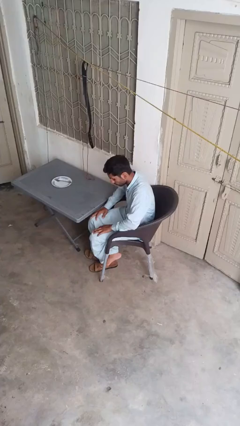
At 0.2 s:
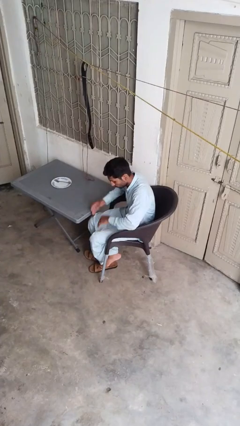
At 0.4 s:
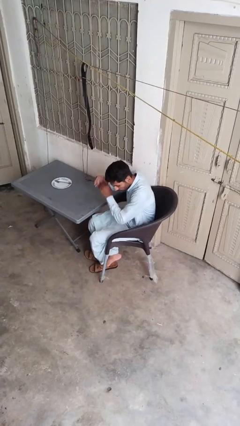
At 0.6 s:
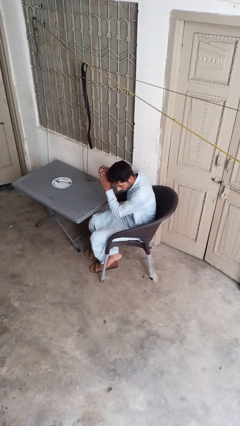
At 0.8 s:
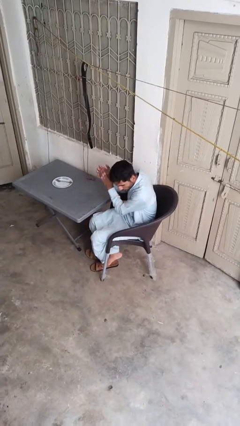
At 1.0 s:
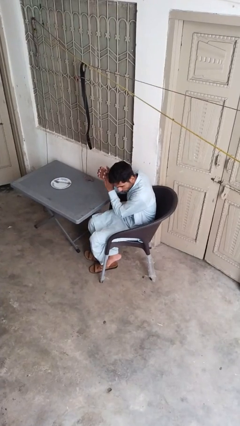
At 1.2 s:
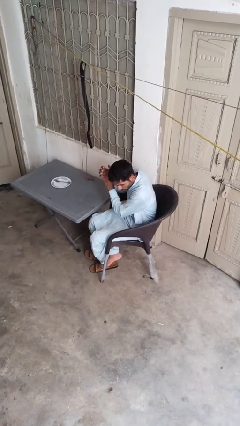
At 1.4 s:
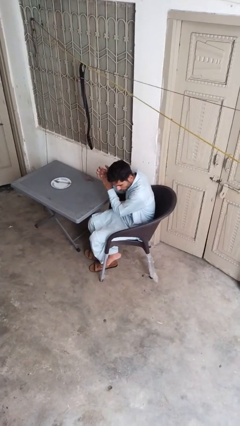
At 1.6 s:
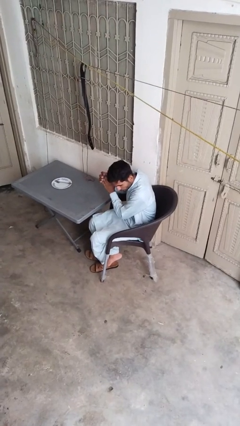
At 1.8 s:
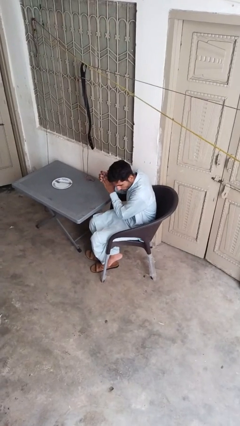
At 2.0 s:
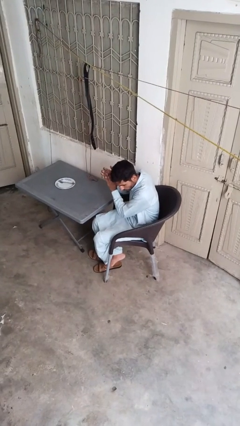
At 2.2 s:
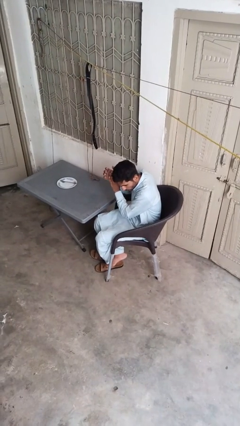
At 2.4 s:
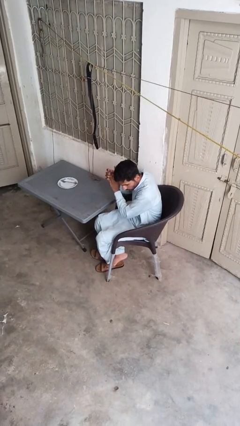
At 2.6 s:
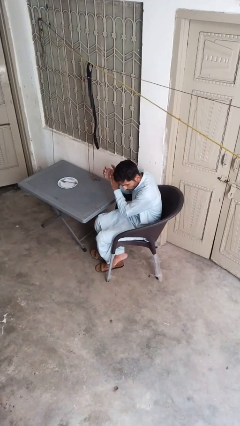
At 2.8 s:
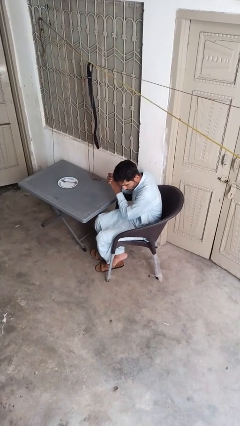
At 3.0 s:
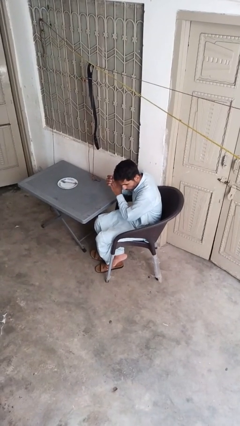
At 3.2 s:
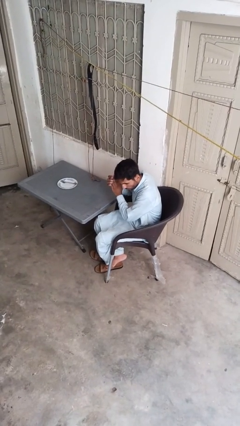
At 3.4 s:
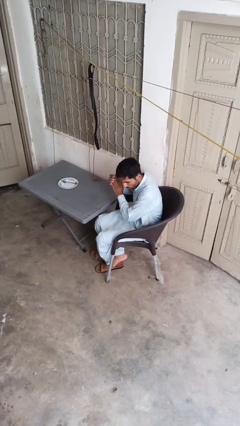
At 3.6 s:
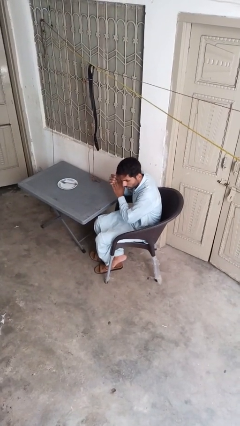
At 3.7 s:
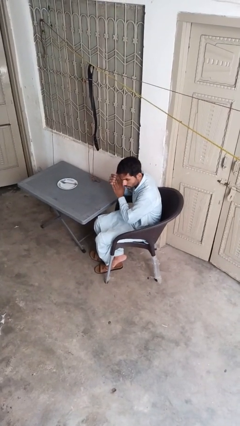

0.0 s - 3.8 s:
person claps hands

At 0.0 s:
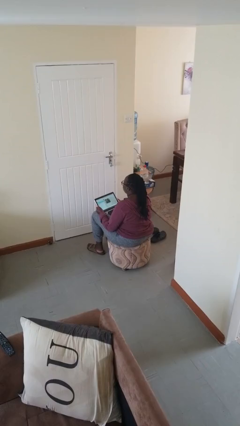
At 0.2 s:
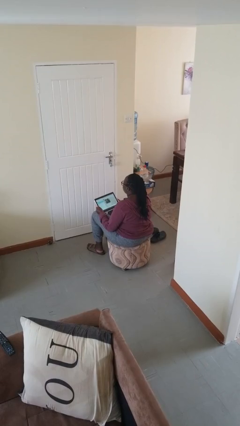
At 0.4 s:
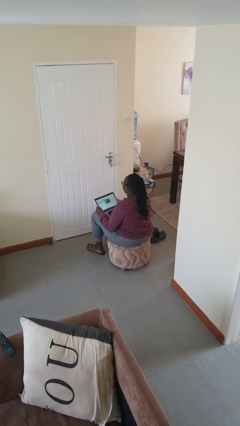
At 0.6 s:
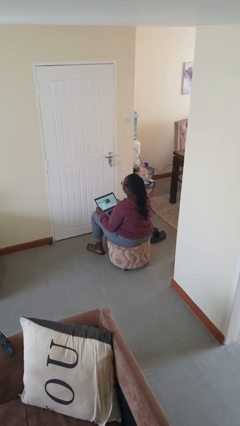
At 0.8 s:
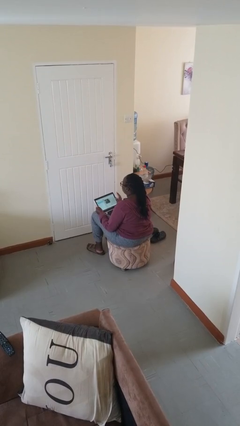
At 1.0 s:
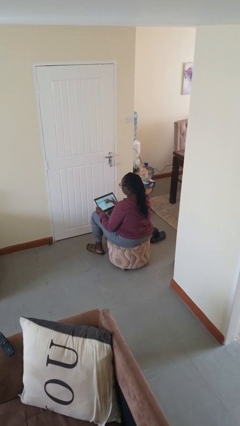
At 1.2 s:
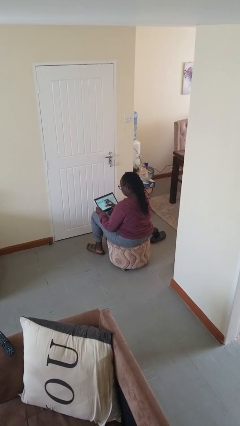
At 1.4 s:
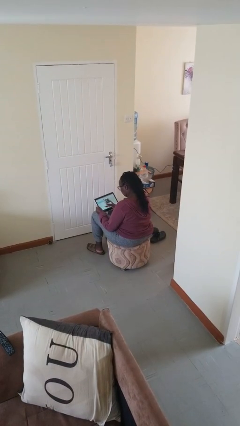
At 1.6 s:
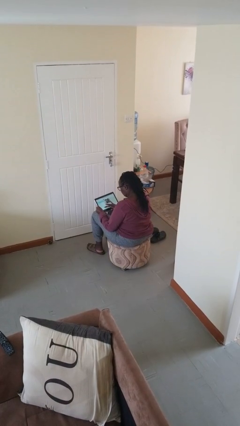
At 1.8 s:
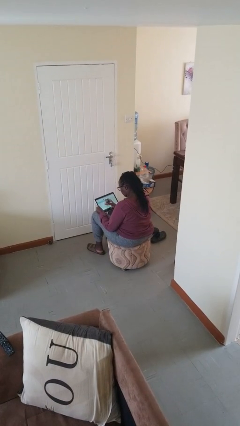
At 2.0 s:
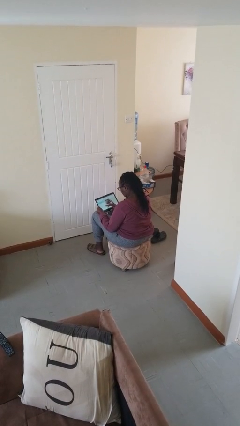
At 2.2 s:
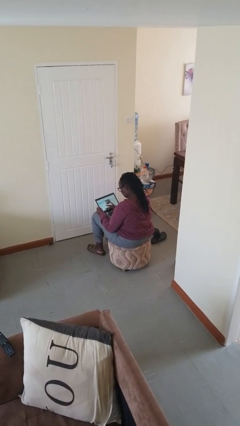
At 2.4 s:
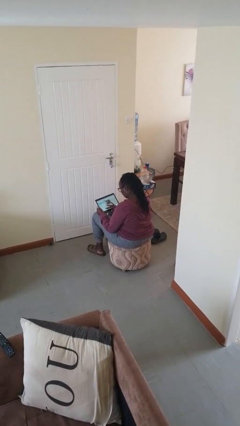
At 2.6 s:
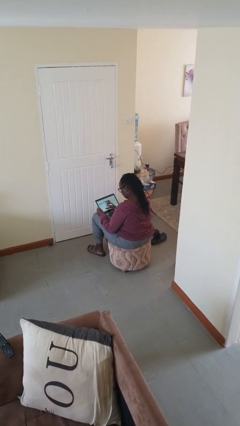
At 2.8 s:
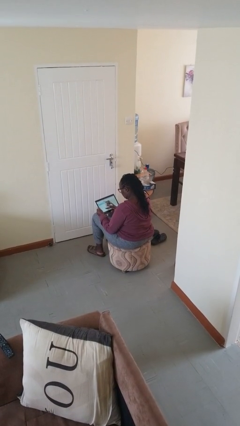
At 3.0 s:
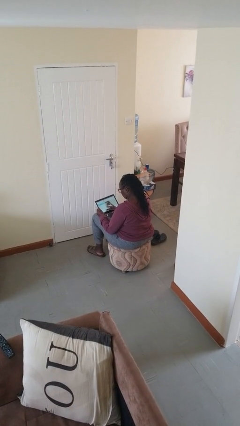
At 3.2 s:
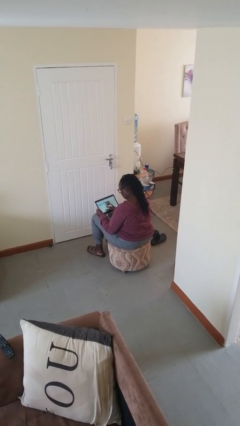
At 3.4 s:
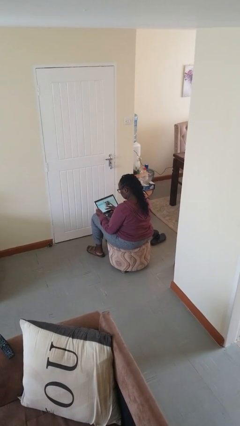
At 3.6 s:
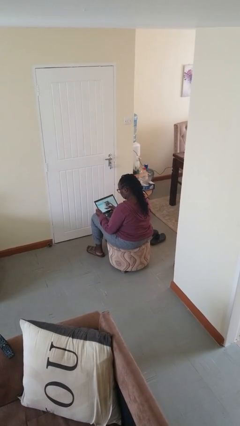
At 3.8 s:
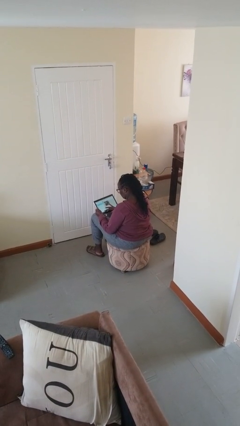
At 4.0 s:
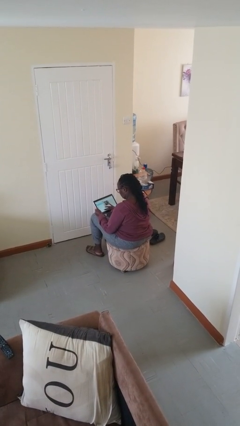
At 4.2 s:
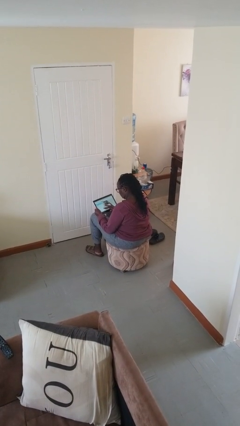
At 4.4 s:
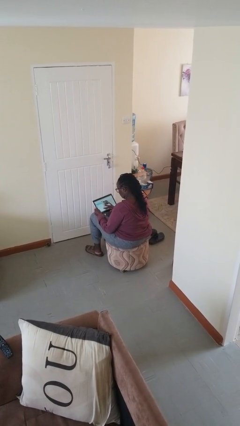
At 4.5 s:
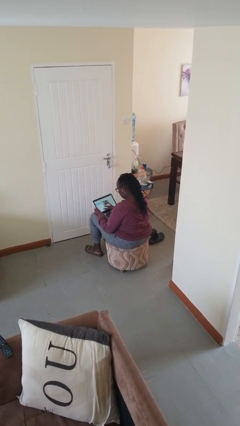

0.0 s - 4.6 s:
person interacts with tablet

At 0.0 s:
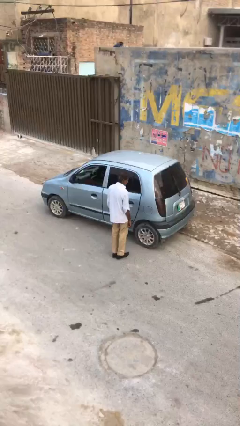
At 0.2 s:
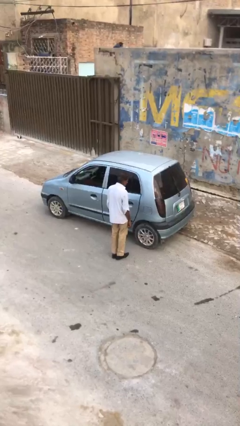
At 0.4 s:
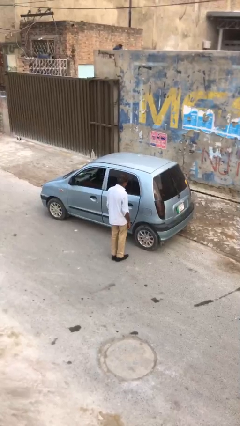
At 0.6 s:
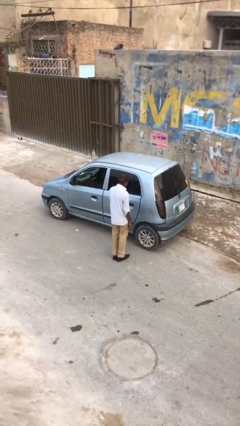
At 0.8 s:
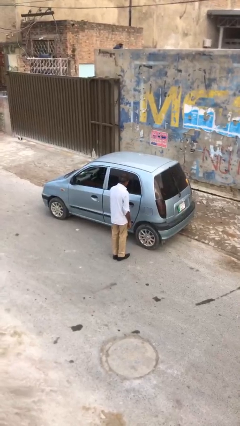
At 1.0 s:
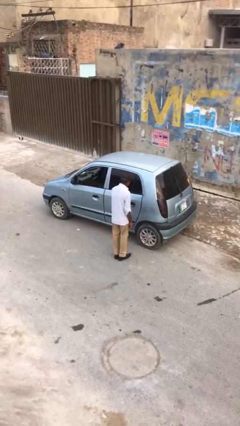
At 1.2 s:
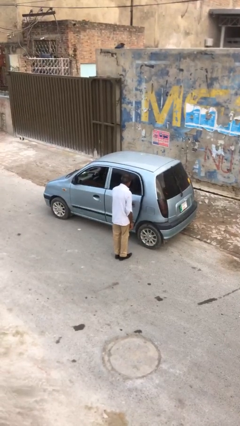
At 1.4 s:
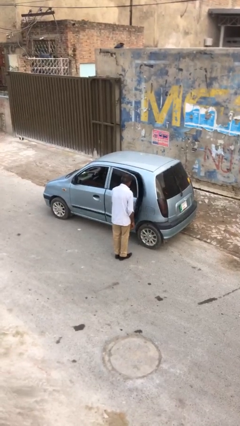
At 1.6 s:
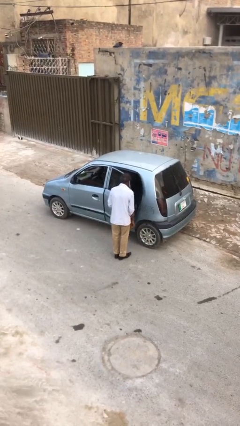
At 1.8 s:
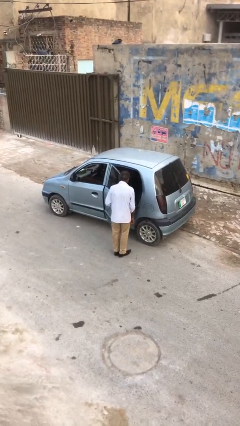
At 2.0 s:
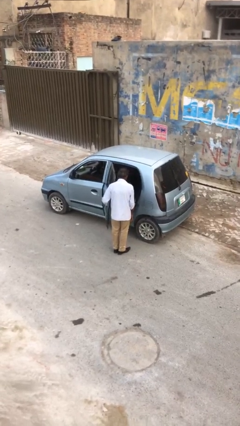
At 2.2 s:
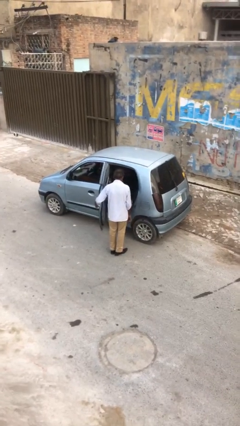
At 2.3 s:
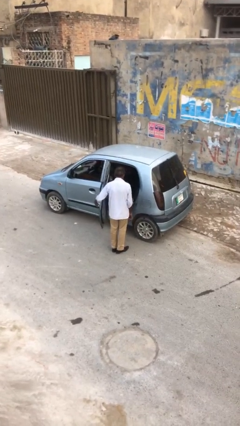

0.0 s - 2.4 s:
person opens car door

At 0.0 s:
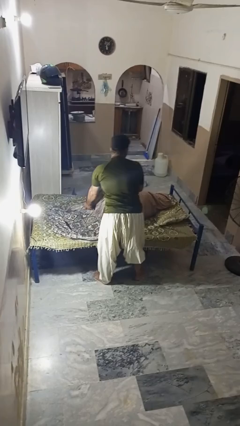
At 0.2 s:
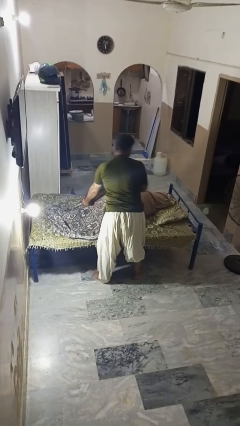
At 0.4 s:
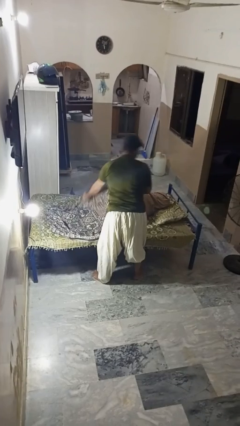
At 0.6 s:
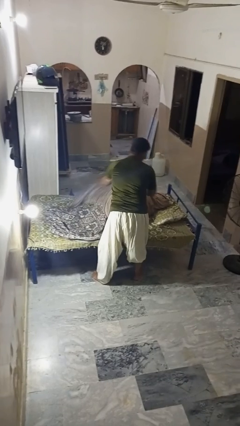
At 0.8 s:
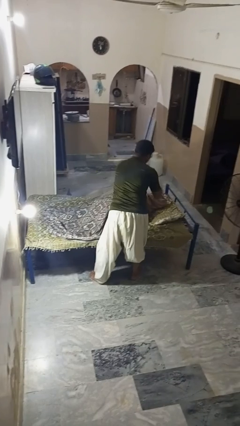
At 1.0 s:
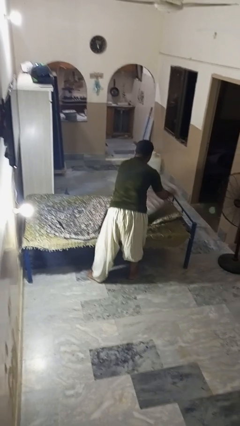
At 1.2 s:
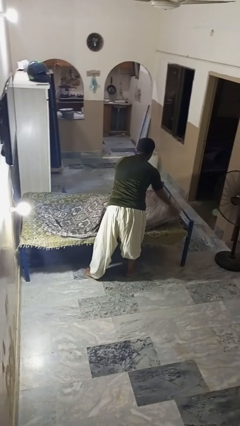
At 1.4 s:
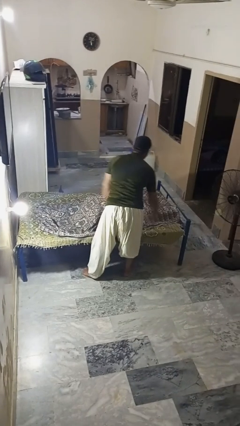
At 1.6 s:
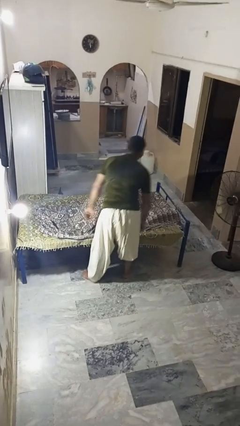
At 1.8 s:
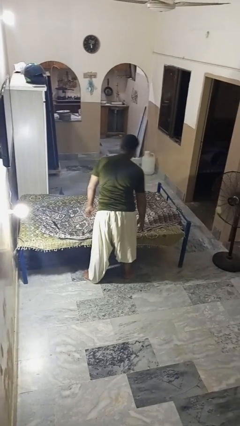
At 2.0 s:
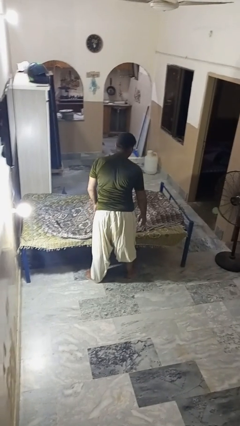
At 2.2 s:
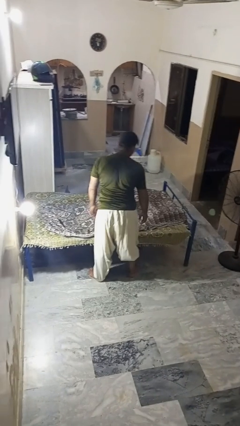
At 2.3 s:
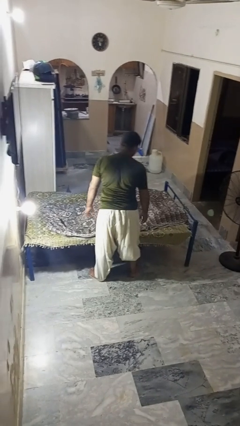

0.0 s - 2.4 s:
person covers friend with blanket

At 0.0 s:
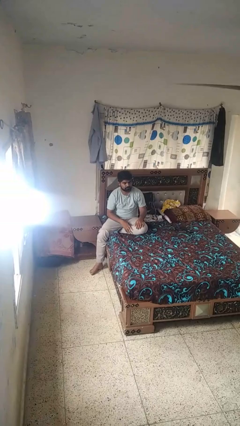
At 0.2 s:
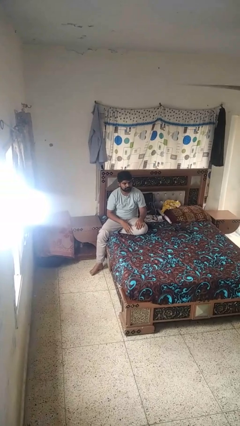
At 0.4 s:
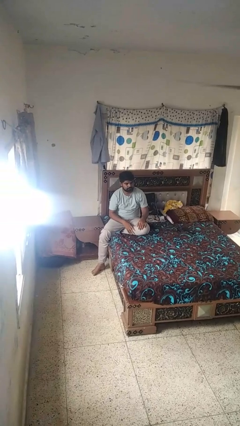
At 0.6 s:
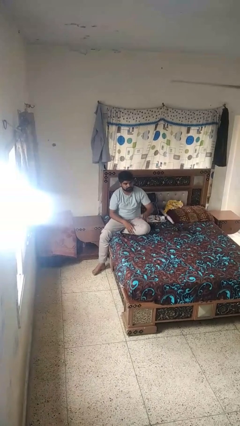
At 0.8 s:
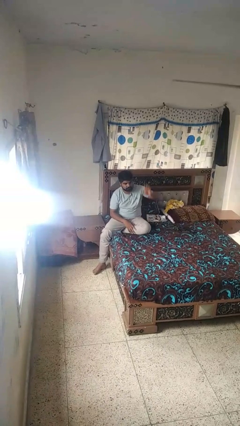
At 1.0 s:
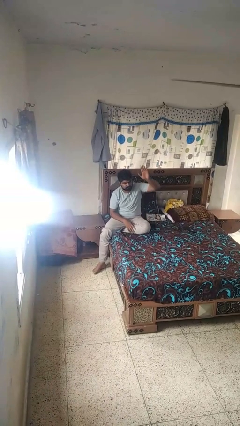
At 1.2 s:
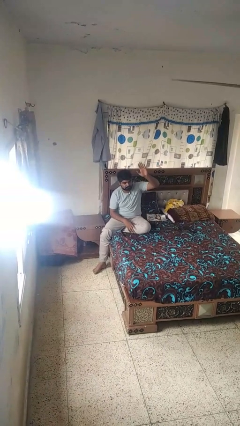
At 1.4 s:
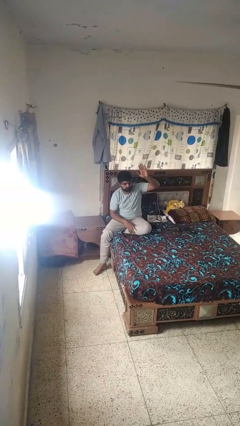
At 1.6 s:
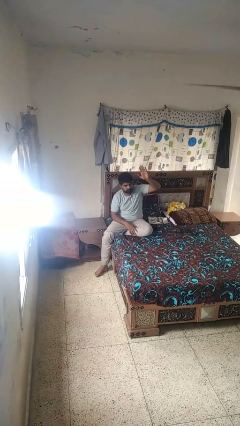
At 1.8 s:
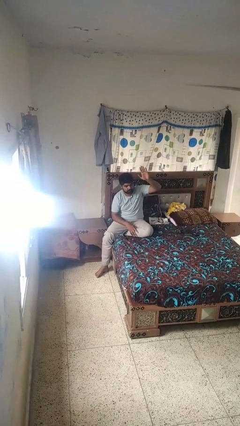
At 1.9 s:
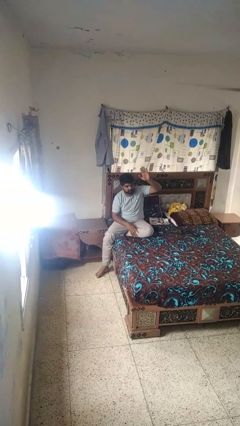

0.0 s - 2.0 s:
person gestures raise hand

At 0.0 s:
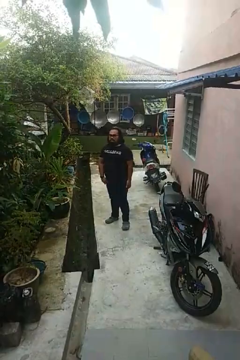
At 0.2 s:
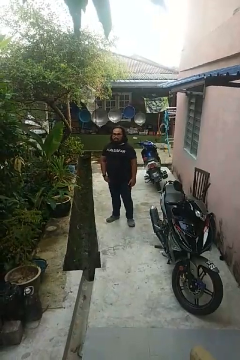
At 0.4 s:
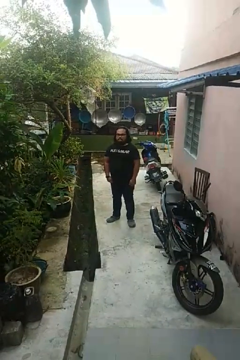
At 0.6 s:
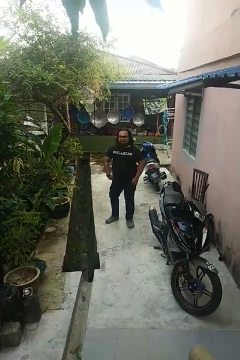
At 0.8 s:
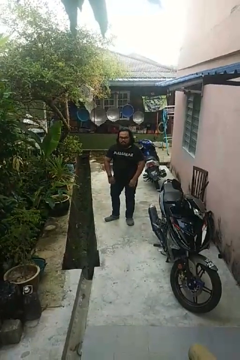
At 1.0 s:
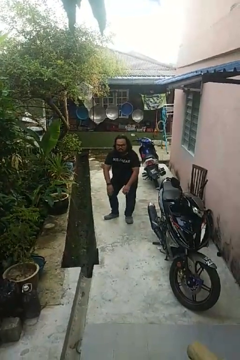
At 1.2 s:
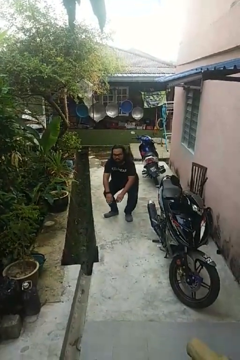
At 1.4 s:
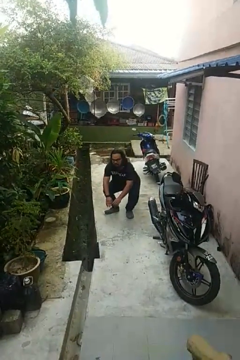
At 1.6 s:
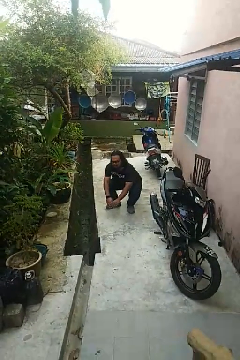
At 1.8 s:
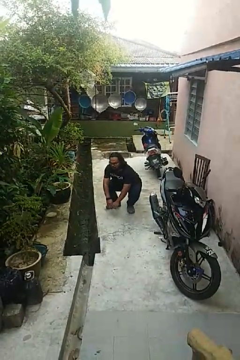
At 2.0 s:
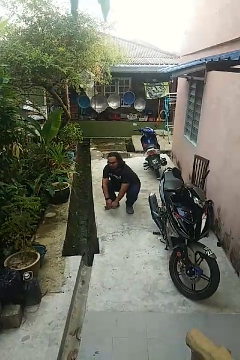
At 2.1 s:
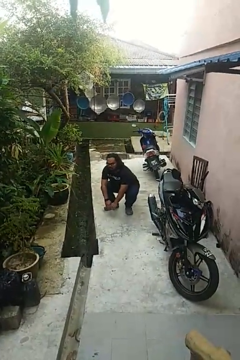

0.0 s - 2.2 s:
person squats

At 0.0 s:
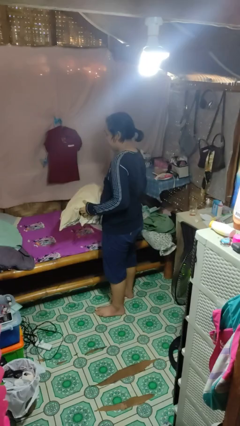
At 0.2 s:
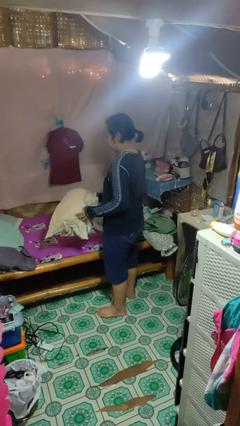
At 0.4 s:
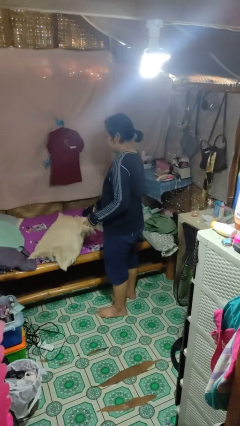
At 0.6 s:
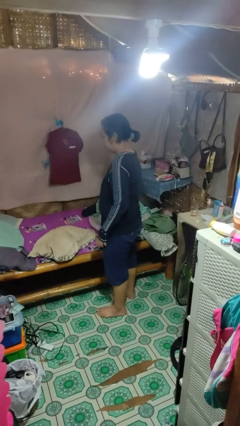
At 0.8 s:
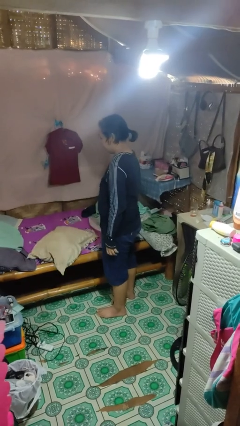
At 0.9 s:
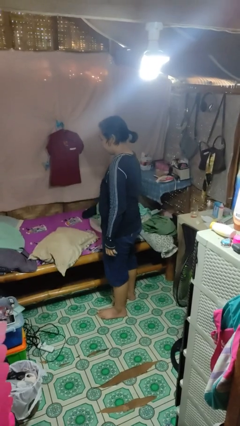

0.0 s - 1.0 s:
person puts down object on bed
